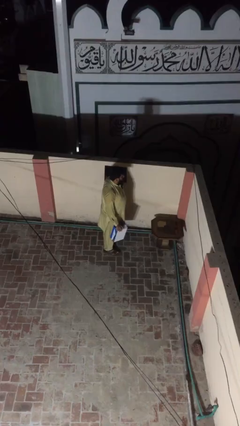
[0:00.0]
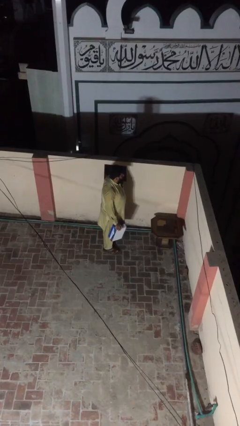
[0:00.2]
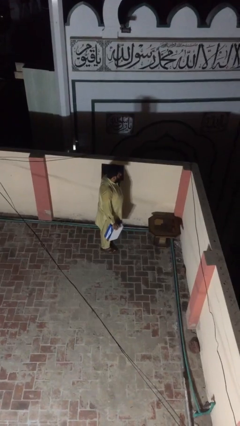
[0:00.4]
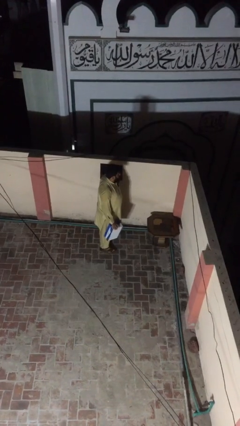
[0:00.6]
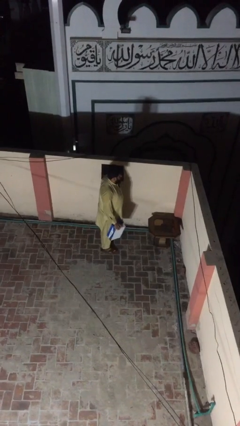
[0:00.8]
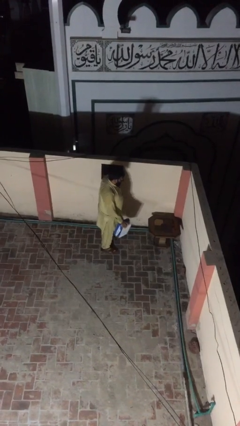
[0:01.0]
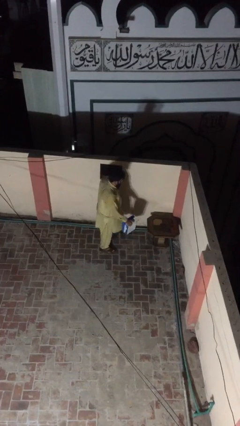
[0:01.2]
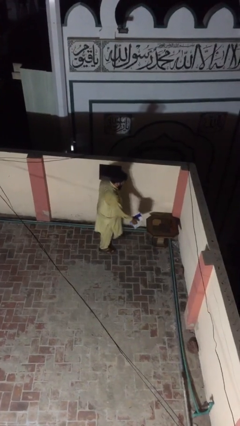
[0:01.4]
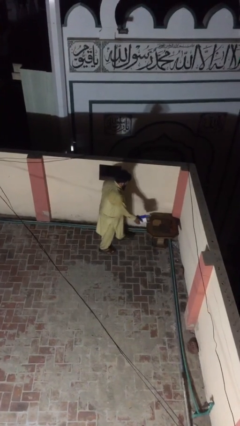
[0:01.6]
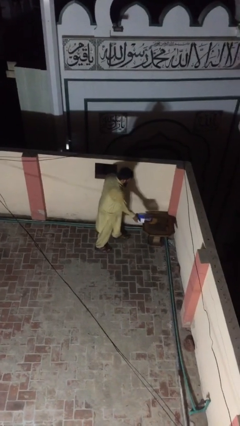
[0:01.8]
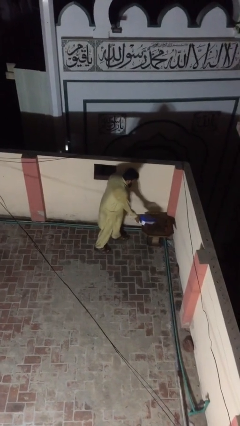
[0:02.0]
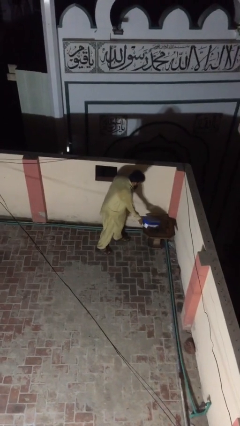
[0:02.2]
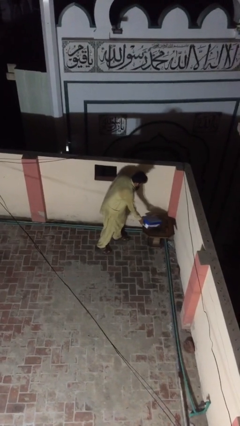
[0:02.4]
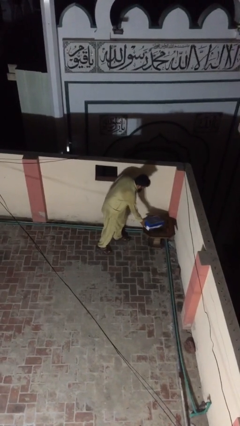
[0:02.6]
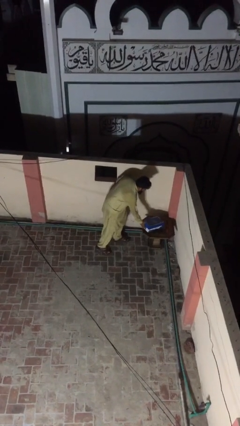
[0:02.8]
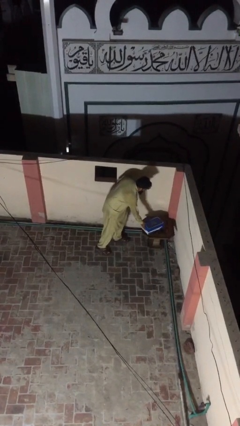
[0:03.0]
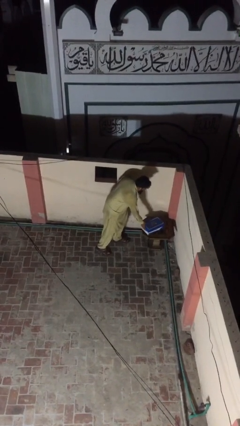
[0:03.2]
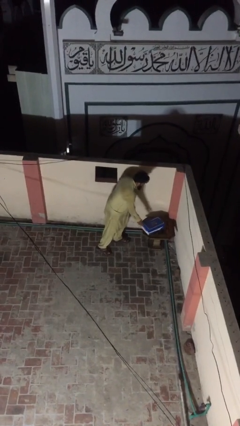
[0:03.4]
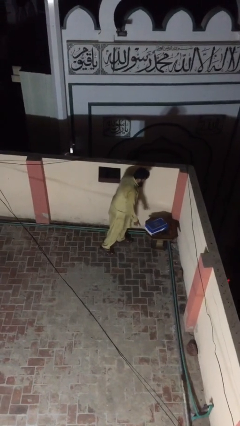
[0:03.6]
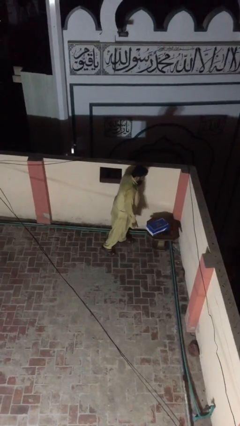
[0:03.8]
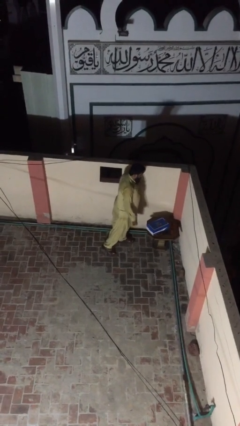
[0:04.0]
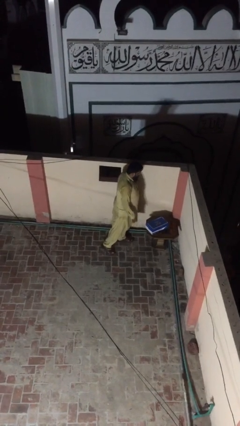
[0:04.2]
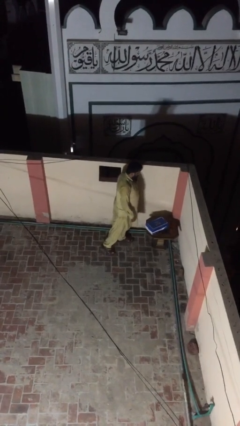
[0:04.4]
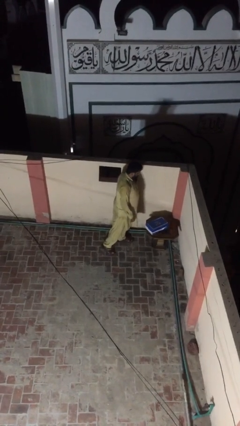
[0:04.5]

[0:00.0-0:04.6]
person puts down object on table

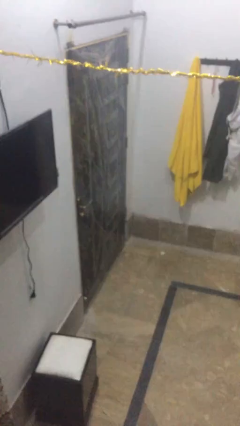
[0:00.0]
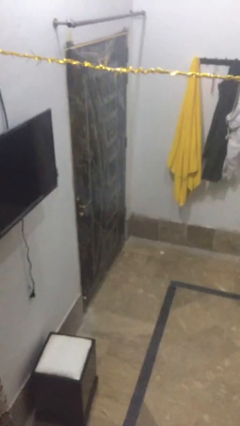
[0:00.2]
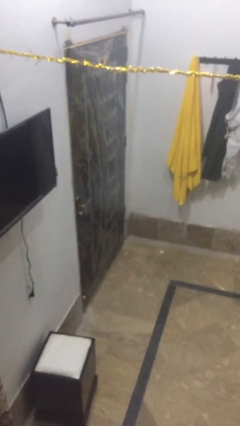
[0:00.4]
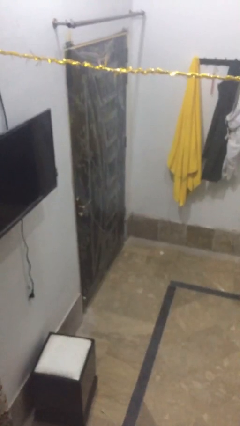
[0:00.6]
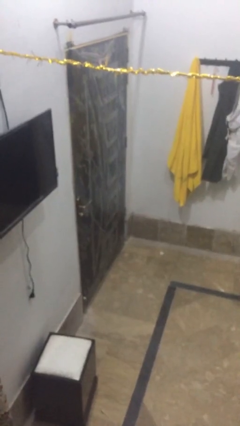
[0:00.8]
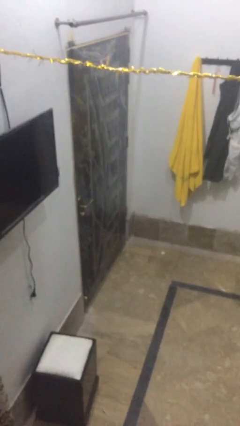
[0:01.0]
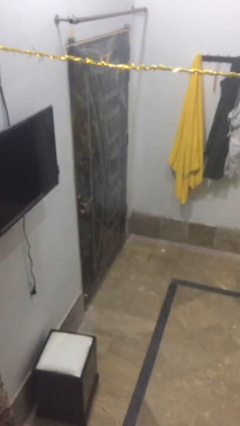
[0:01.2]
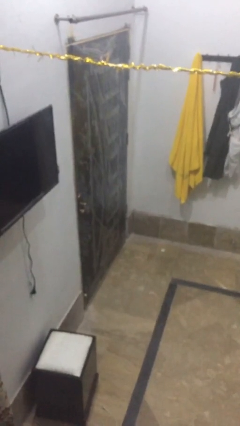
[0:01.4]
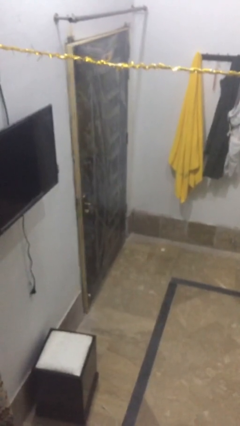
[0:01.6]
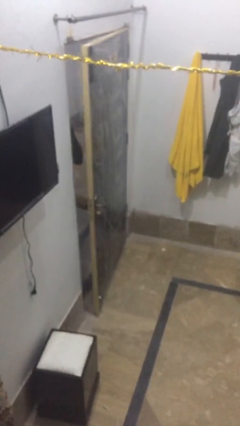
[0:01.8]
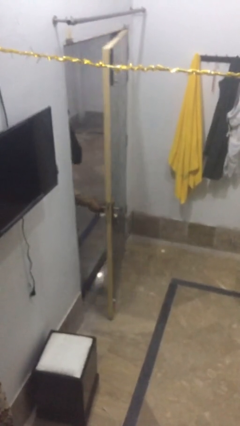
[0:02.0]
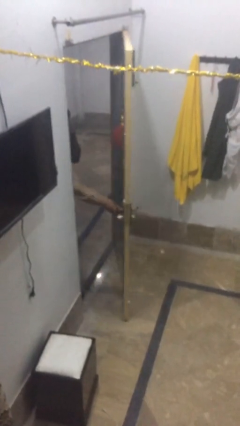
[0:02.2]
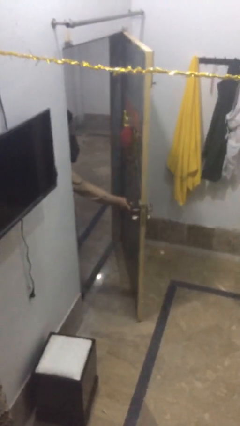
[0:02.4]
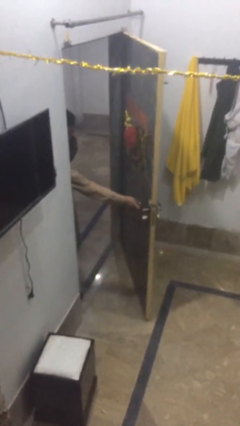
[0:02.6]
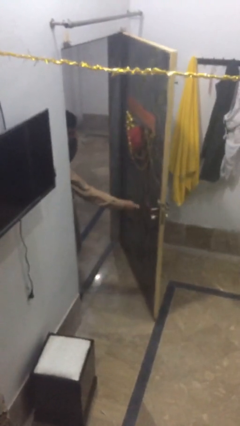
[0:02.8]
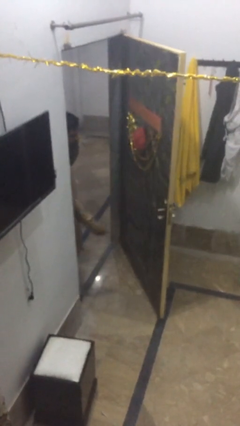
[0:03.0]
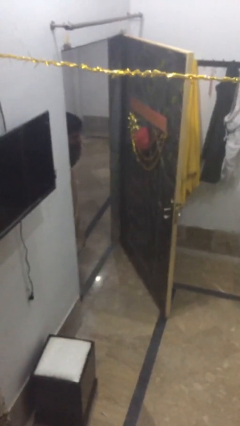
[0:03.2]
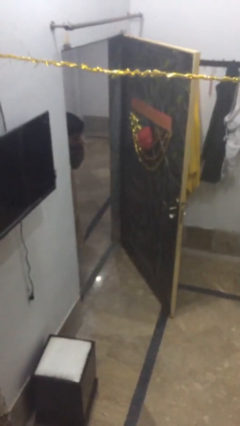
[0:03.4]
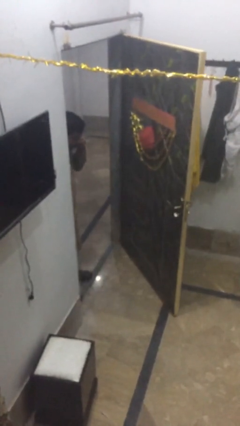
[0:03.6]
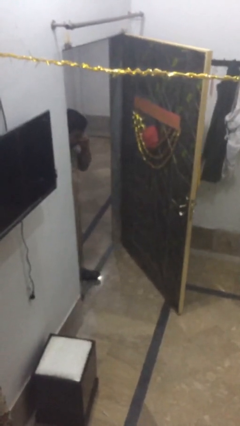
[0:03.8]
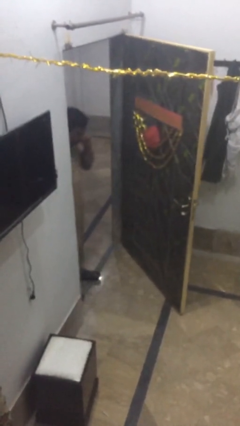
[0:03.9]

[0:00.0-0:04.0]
person opens facility door

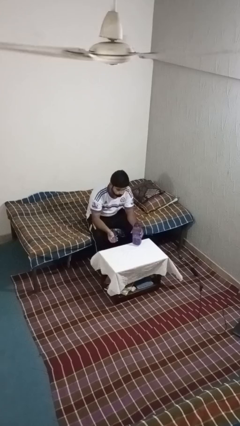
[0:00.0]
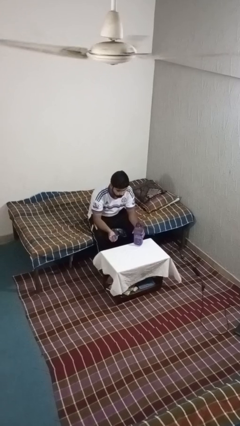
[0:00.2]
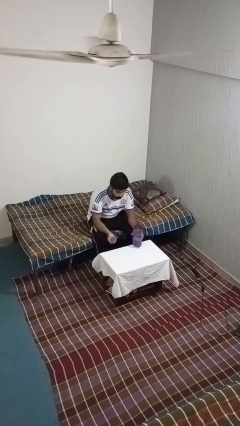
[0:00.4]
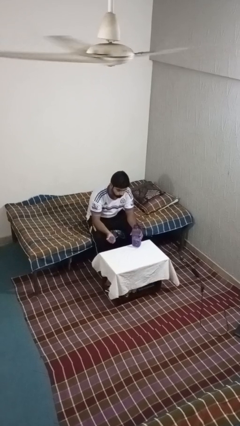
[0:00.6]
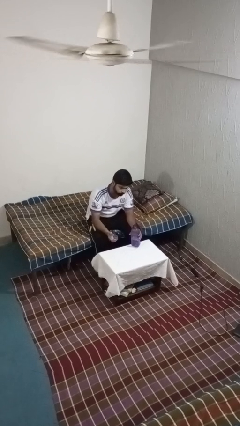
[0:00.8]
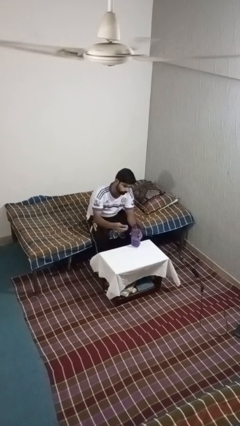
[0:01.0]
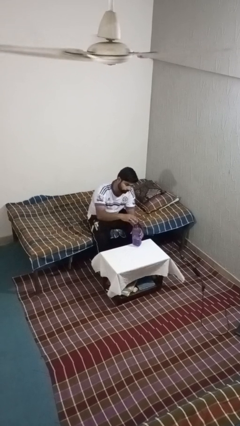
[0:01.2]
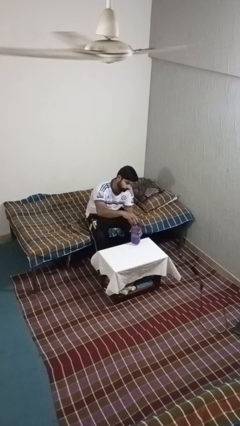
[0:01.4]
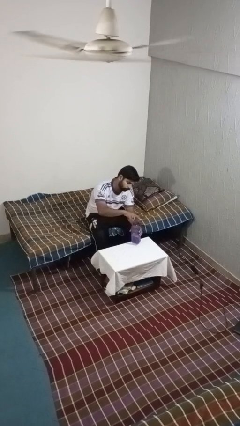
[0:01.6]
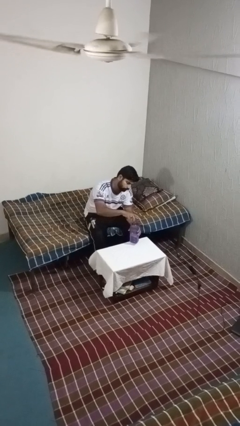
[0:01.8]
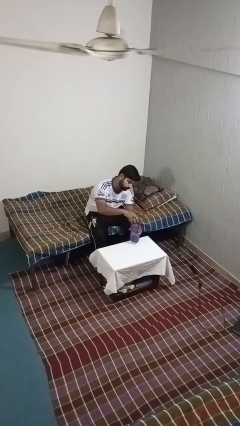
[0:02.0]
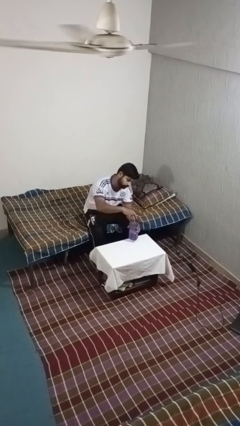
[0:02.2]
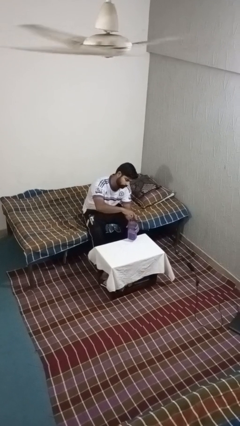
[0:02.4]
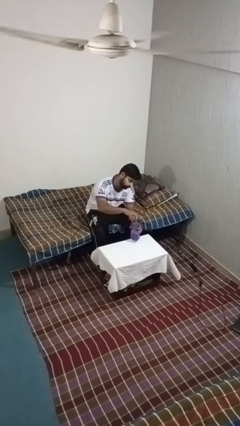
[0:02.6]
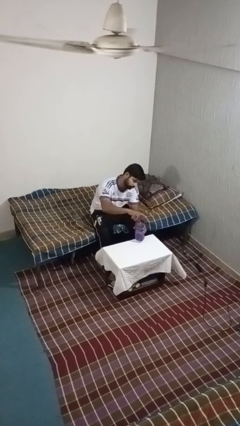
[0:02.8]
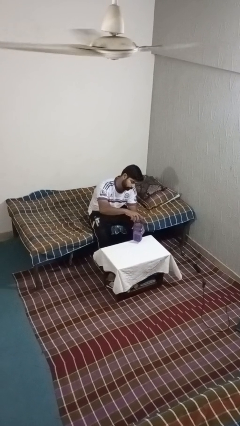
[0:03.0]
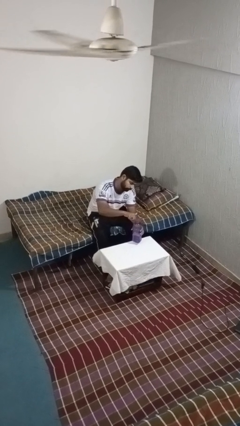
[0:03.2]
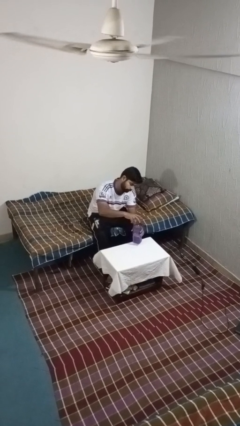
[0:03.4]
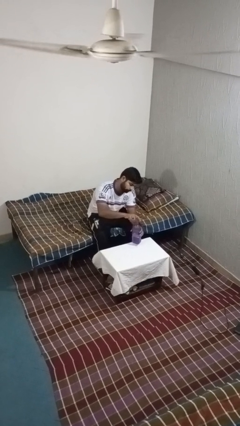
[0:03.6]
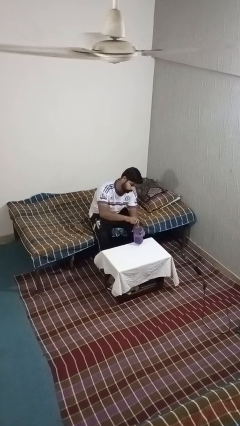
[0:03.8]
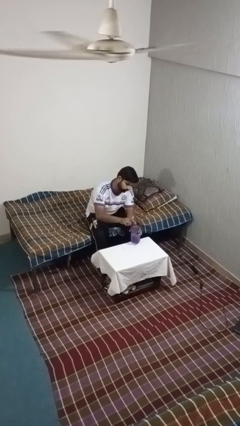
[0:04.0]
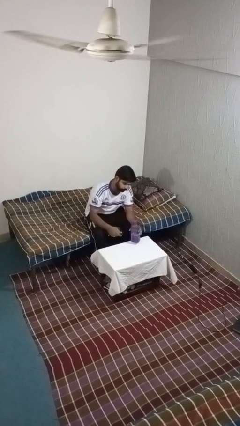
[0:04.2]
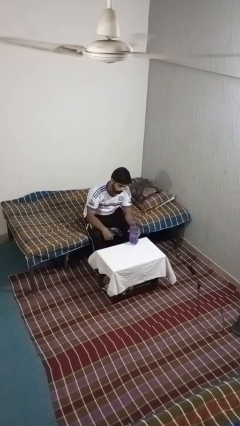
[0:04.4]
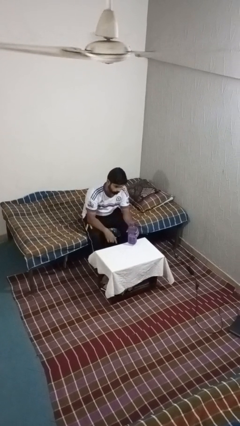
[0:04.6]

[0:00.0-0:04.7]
person screws lid to bottle

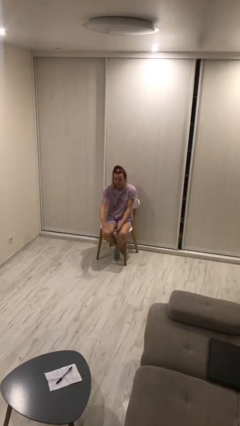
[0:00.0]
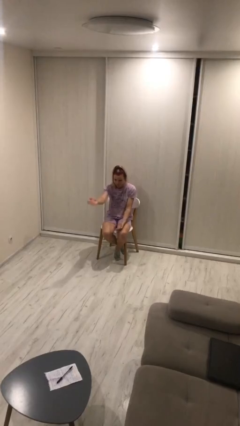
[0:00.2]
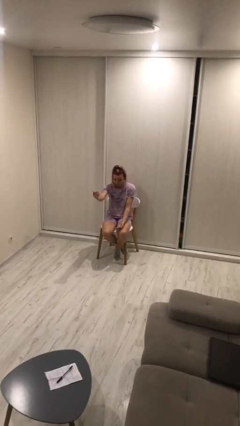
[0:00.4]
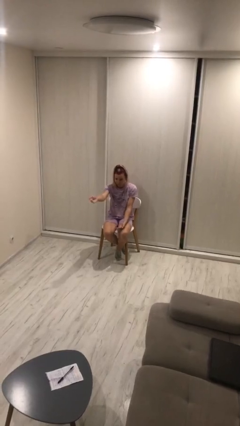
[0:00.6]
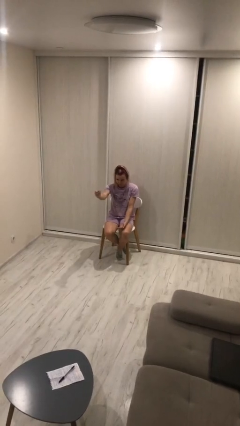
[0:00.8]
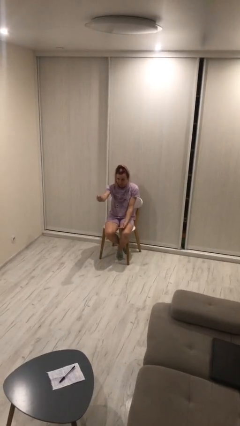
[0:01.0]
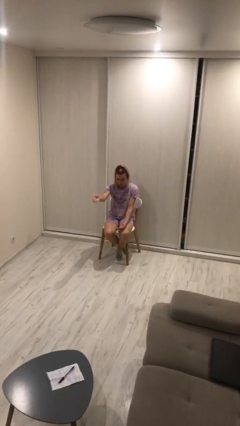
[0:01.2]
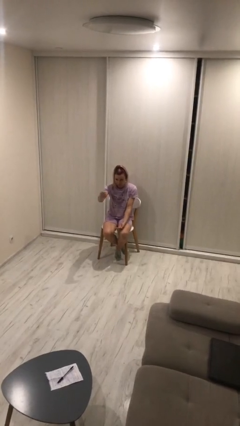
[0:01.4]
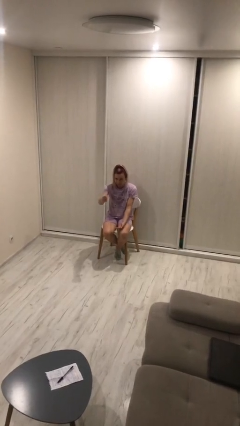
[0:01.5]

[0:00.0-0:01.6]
person gestures come here

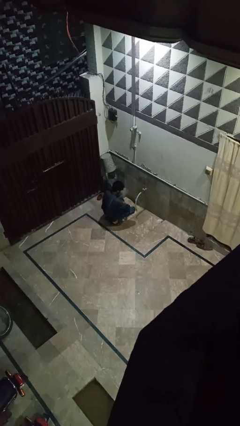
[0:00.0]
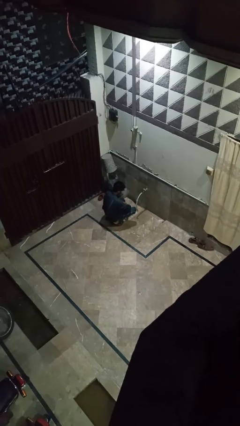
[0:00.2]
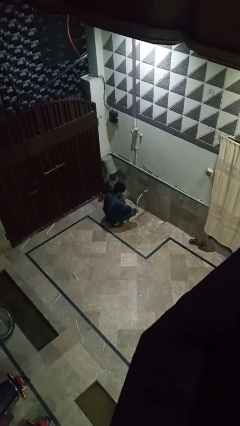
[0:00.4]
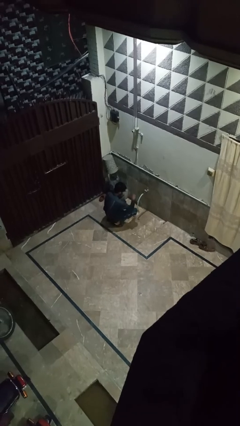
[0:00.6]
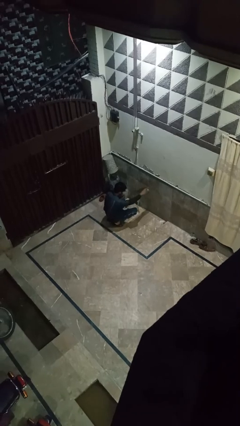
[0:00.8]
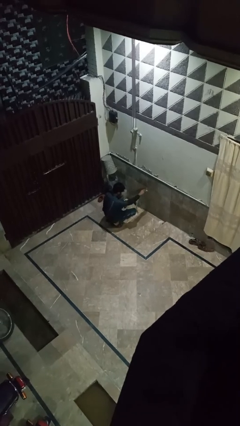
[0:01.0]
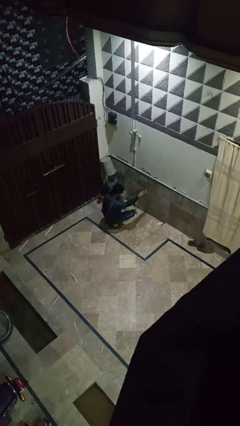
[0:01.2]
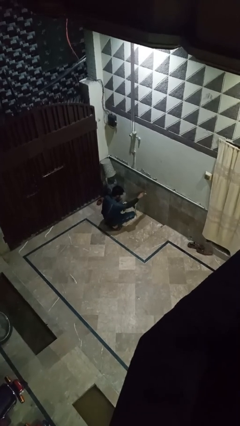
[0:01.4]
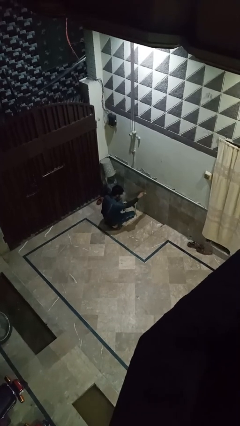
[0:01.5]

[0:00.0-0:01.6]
person turns on faucet

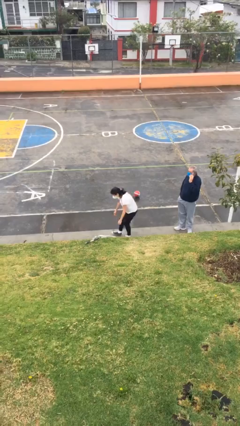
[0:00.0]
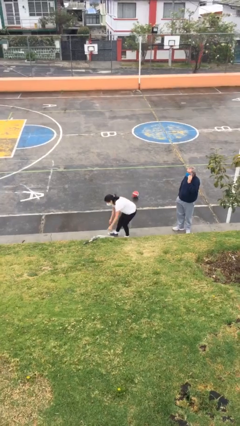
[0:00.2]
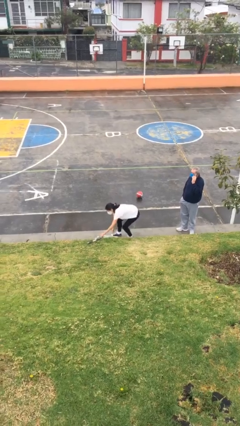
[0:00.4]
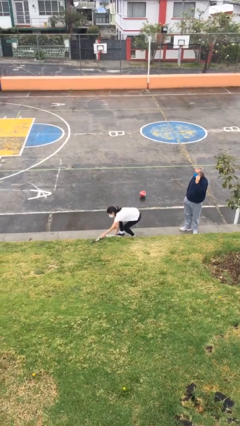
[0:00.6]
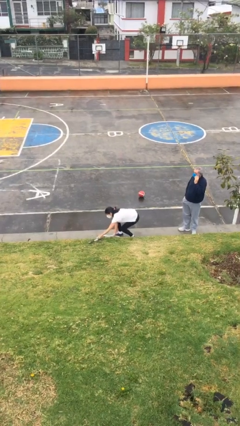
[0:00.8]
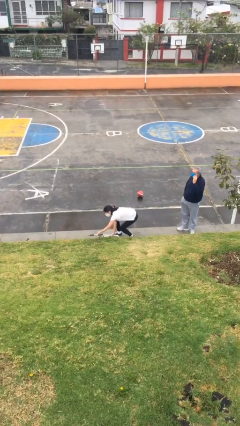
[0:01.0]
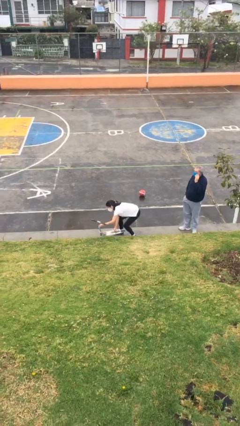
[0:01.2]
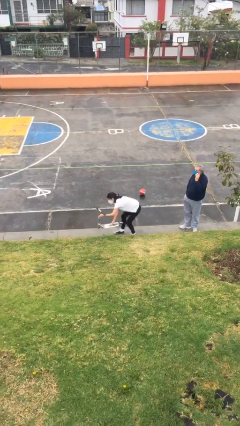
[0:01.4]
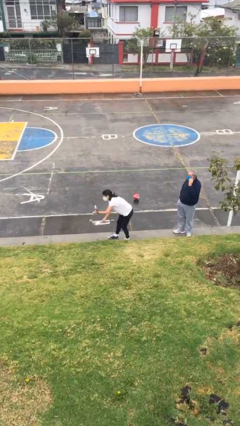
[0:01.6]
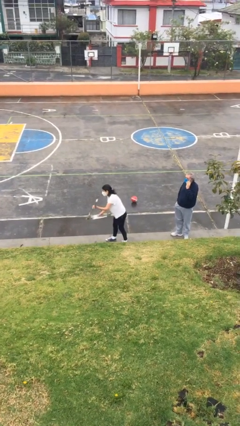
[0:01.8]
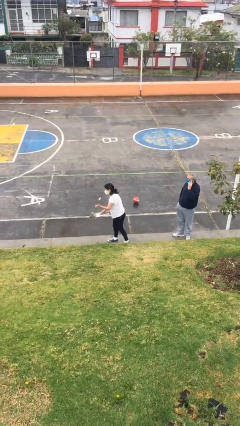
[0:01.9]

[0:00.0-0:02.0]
person picks up object from floor
